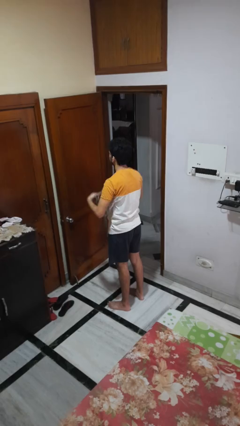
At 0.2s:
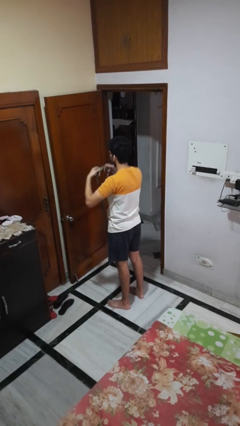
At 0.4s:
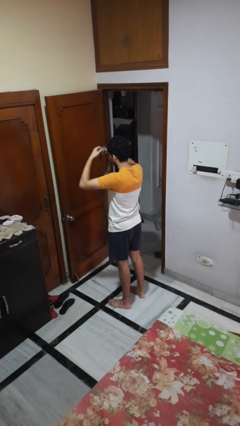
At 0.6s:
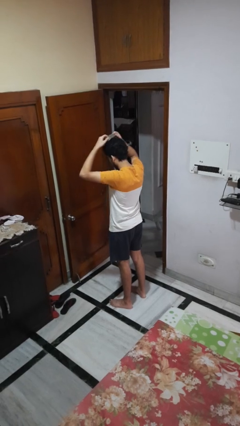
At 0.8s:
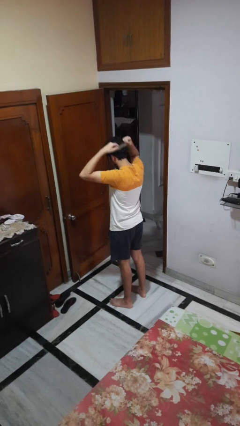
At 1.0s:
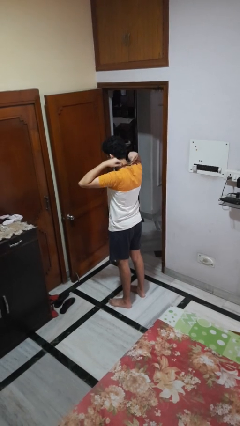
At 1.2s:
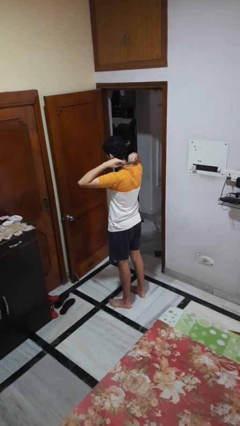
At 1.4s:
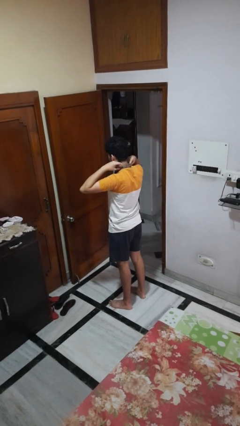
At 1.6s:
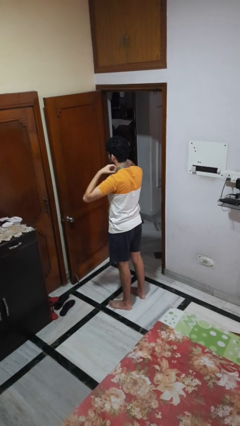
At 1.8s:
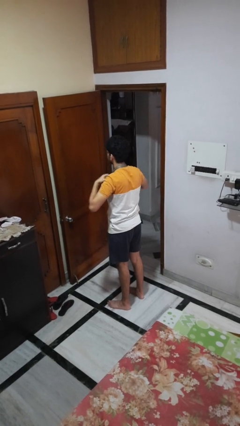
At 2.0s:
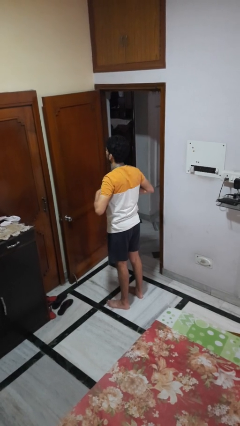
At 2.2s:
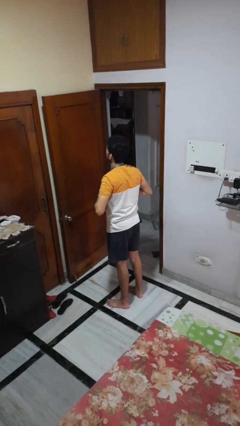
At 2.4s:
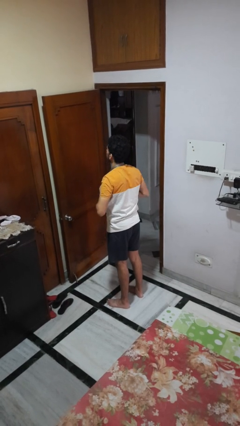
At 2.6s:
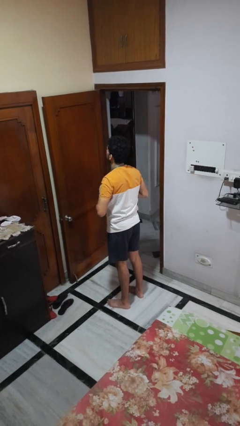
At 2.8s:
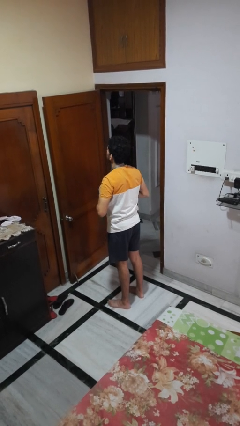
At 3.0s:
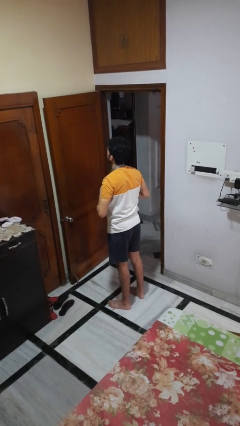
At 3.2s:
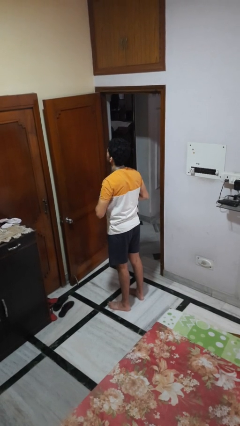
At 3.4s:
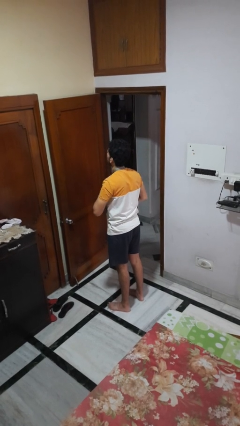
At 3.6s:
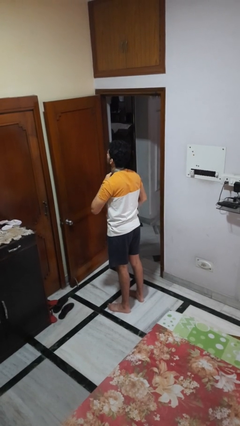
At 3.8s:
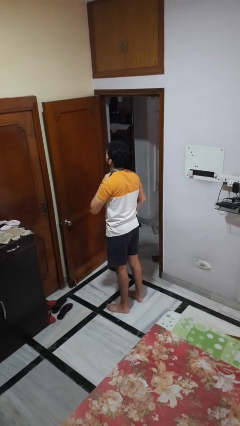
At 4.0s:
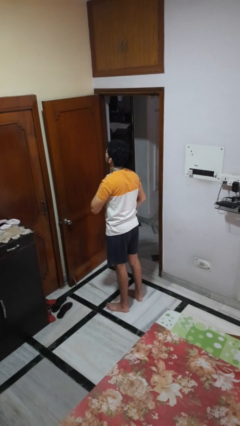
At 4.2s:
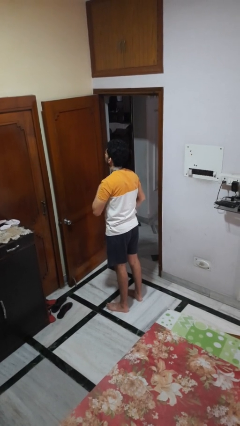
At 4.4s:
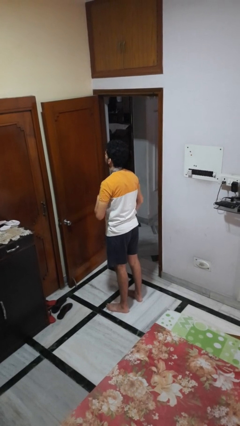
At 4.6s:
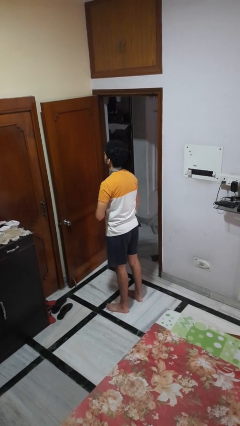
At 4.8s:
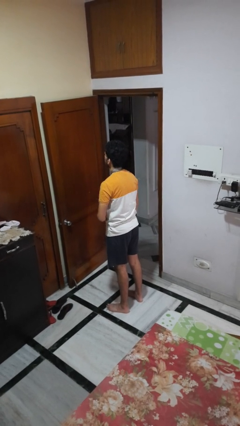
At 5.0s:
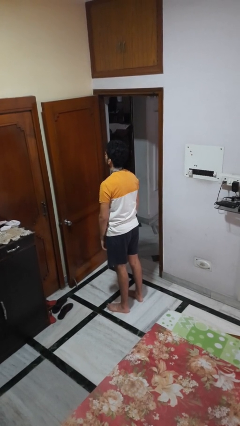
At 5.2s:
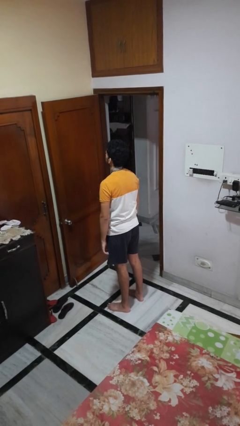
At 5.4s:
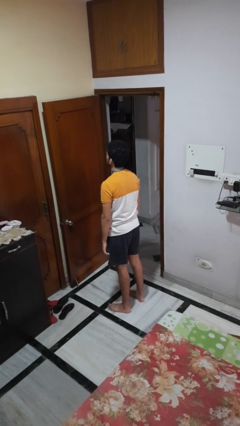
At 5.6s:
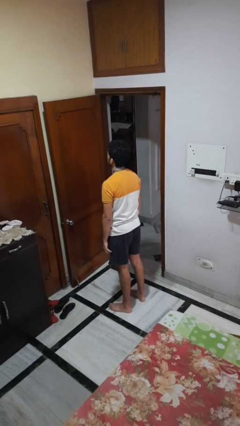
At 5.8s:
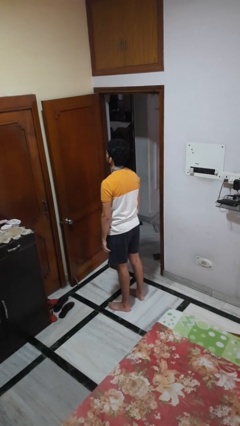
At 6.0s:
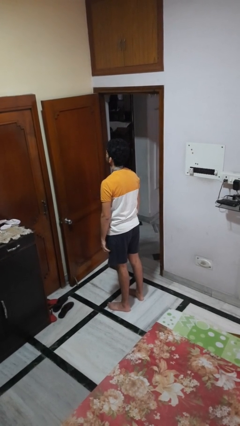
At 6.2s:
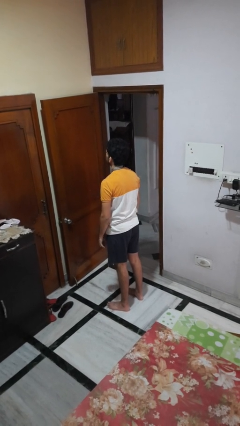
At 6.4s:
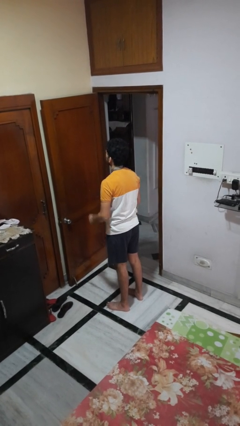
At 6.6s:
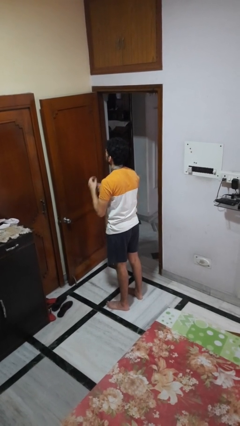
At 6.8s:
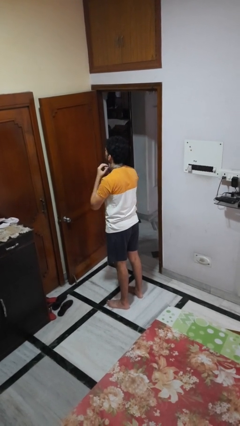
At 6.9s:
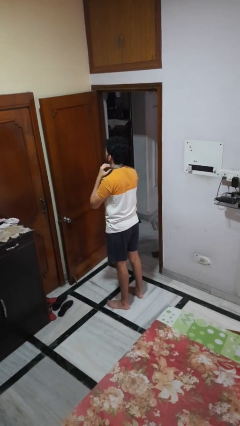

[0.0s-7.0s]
person puts on necktie

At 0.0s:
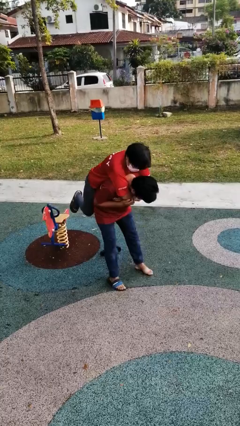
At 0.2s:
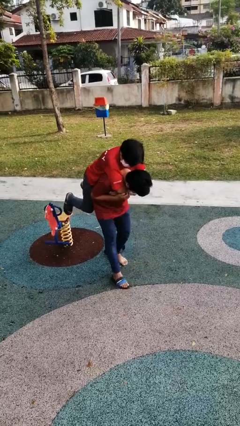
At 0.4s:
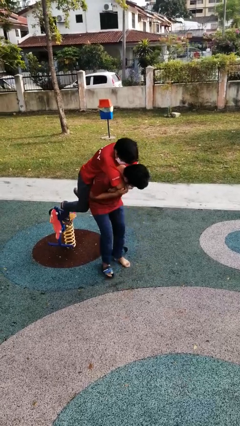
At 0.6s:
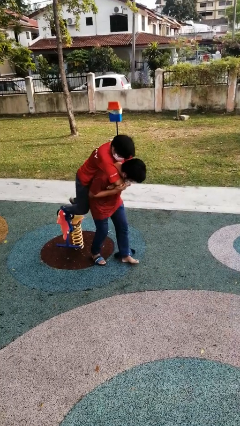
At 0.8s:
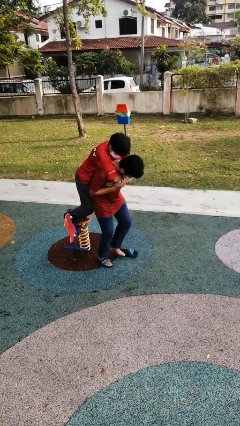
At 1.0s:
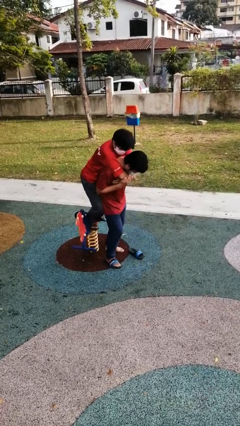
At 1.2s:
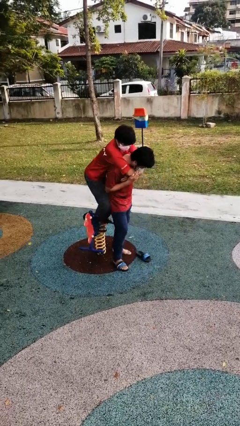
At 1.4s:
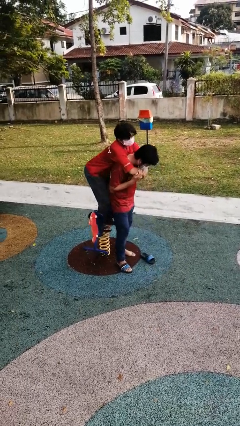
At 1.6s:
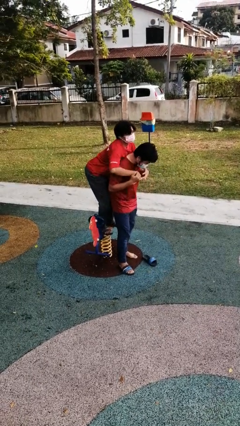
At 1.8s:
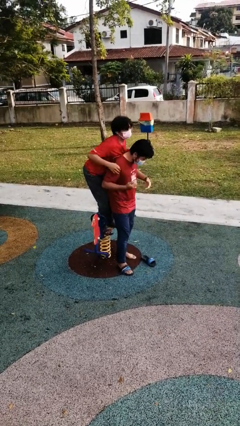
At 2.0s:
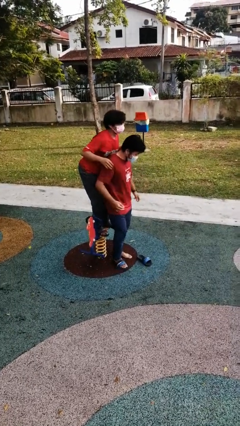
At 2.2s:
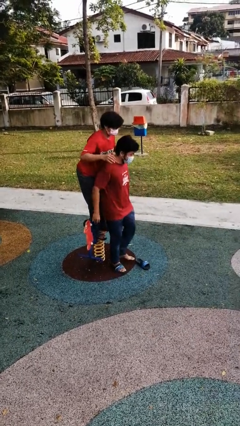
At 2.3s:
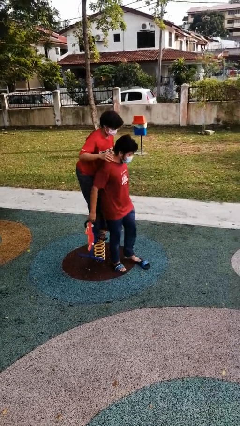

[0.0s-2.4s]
person puts down person

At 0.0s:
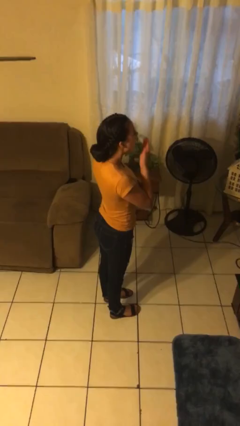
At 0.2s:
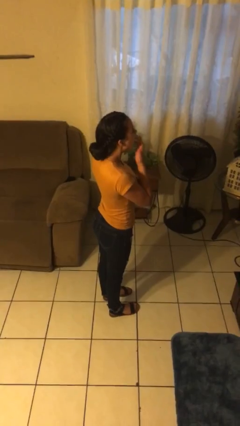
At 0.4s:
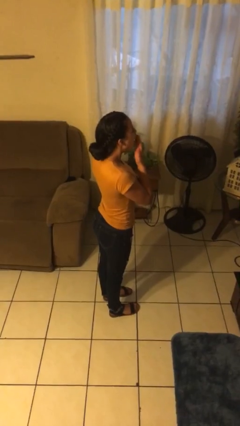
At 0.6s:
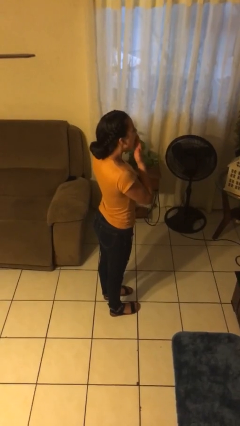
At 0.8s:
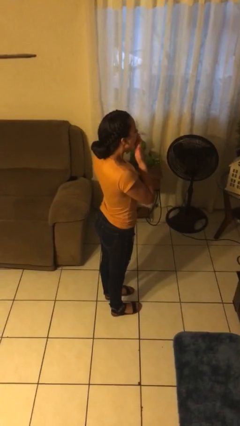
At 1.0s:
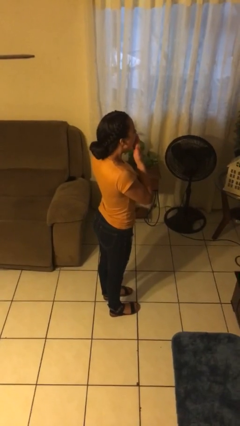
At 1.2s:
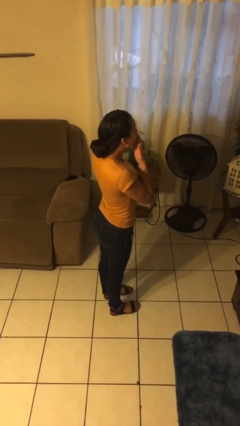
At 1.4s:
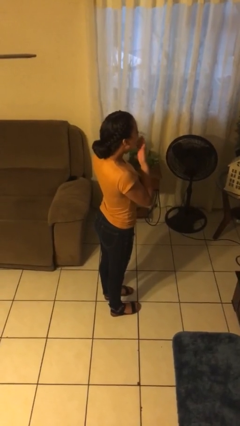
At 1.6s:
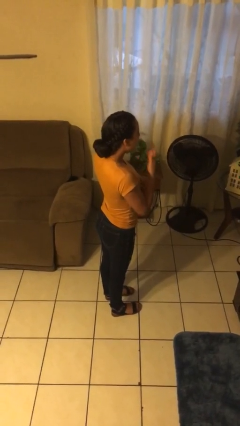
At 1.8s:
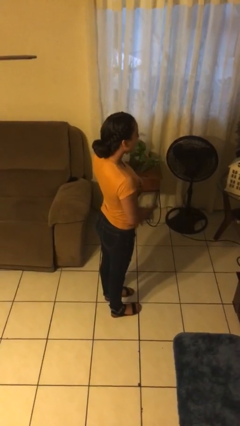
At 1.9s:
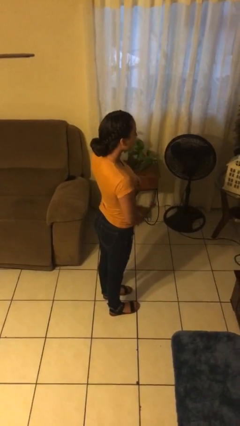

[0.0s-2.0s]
person yawns

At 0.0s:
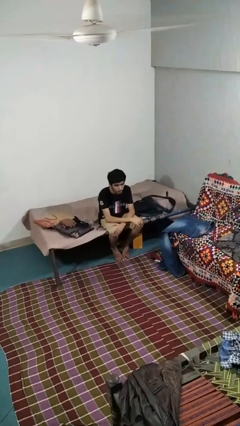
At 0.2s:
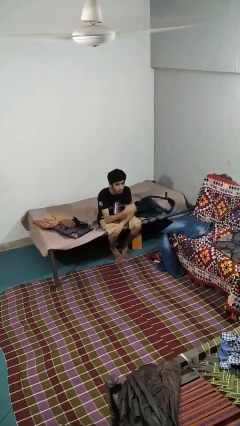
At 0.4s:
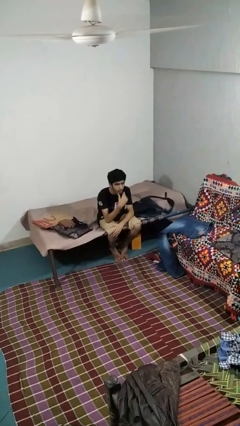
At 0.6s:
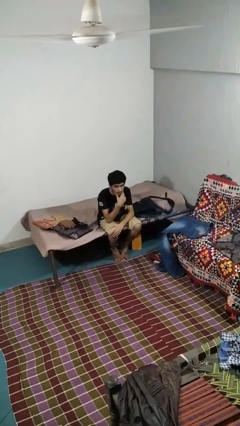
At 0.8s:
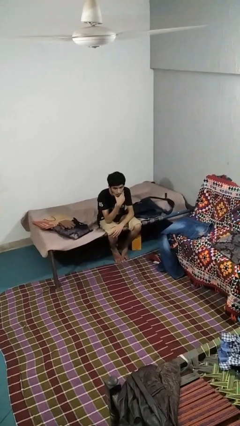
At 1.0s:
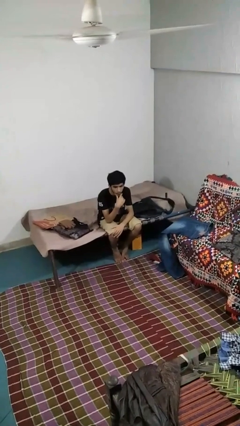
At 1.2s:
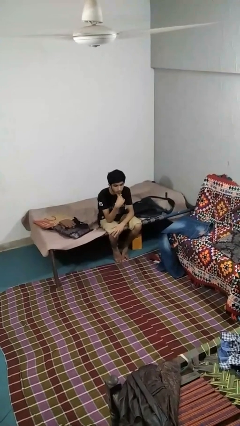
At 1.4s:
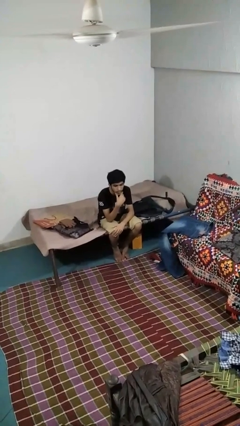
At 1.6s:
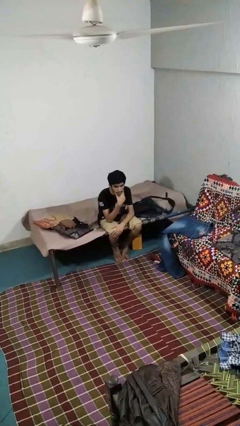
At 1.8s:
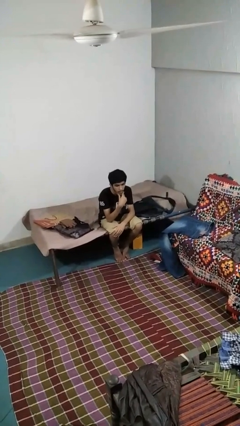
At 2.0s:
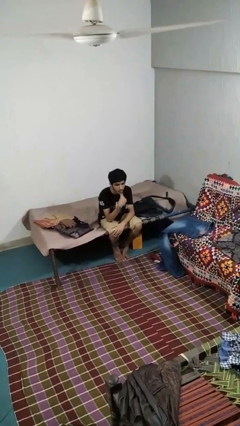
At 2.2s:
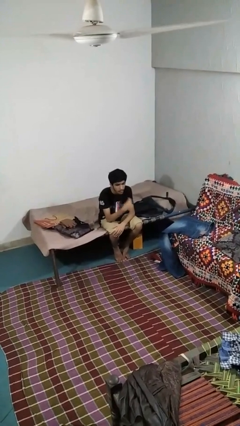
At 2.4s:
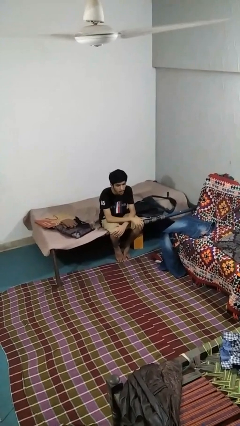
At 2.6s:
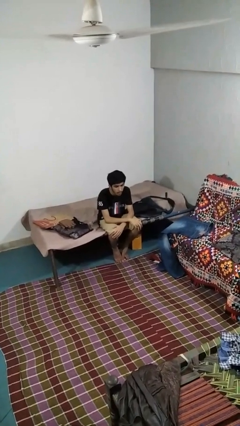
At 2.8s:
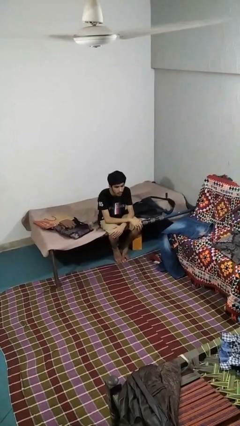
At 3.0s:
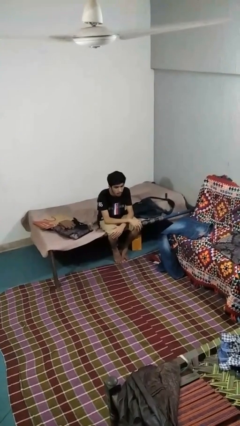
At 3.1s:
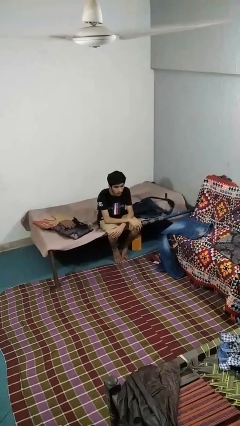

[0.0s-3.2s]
person strokes chin

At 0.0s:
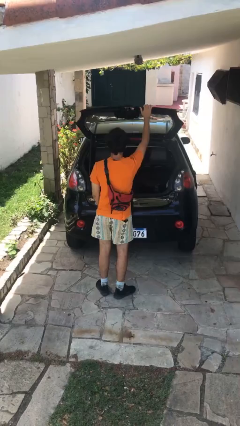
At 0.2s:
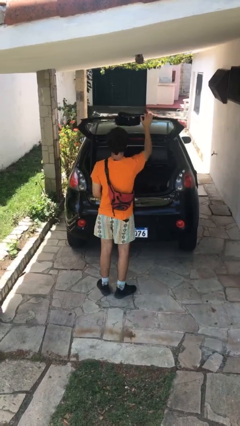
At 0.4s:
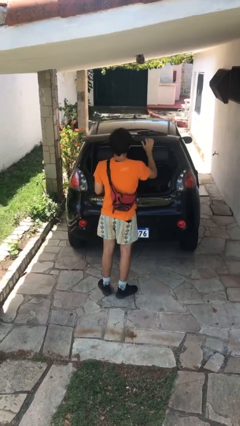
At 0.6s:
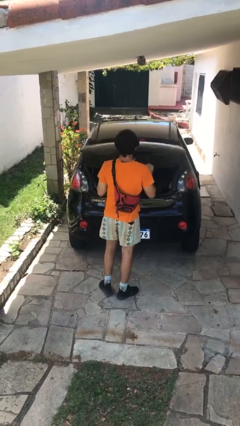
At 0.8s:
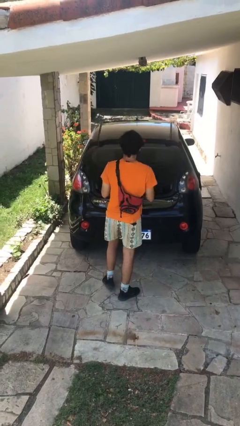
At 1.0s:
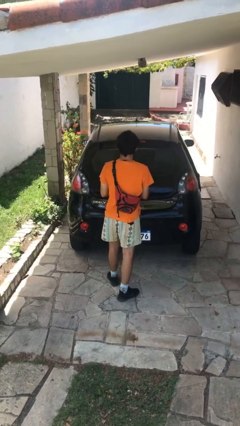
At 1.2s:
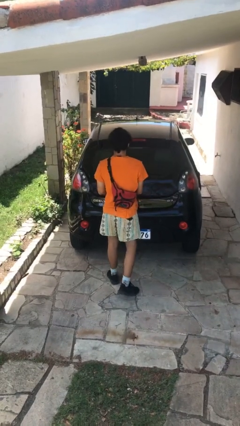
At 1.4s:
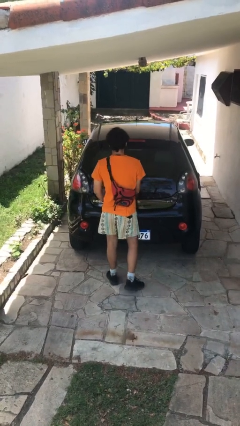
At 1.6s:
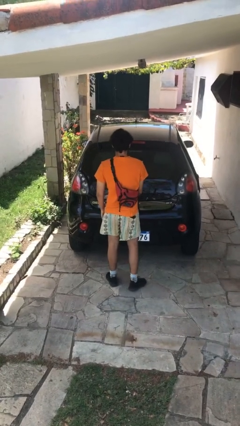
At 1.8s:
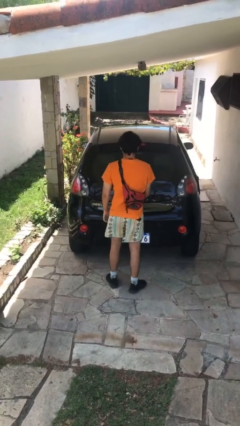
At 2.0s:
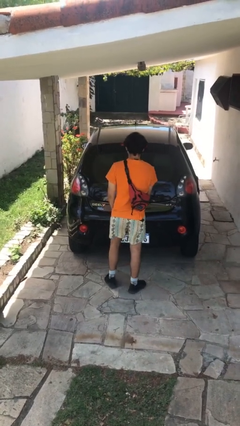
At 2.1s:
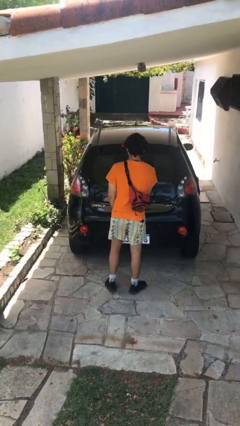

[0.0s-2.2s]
person closes car trunk

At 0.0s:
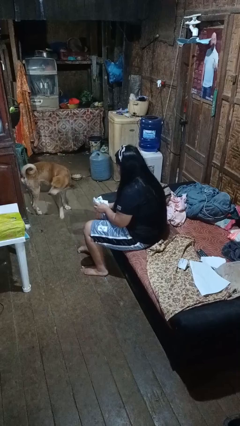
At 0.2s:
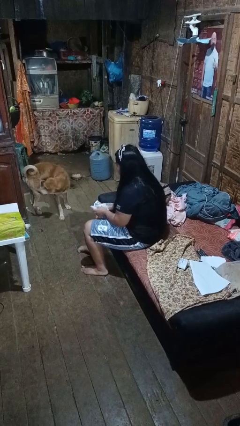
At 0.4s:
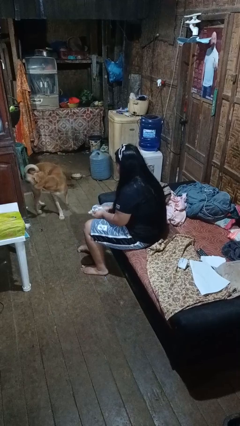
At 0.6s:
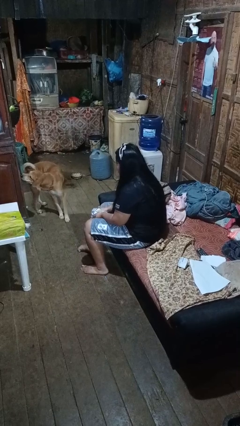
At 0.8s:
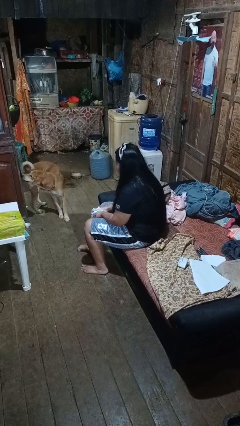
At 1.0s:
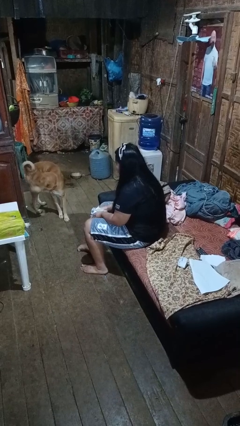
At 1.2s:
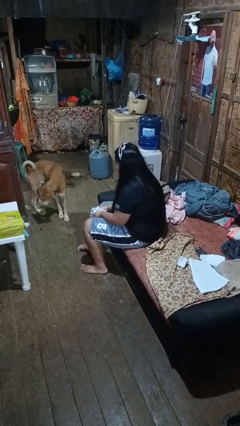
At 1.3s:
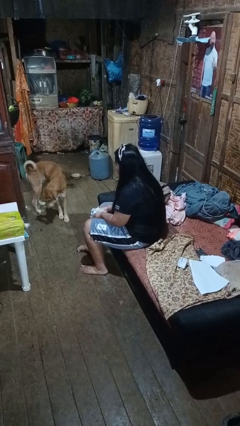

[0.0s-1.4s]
person crumples paper
